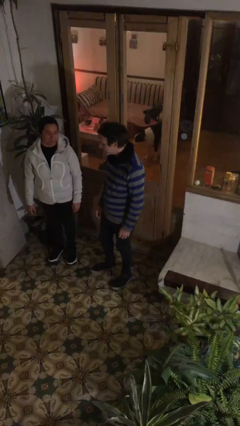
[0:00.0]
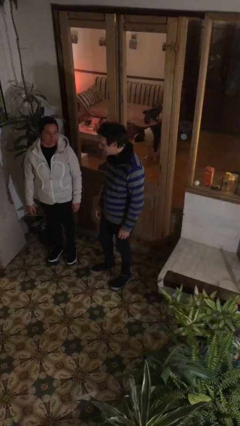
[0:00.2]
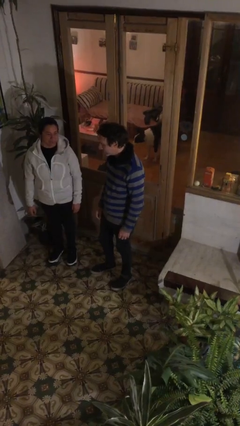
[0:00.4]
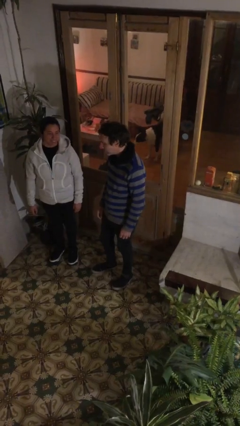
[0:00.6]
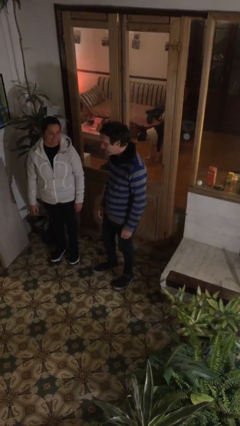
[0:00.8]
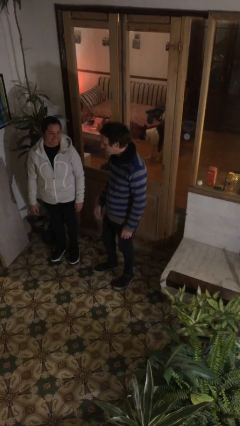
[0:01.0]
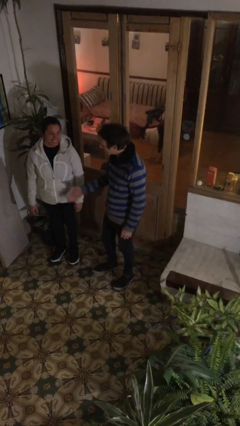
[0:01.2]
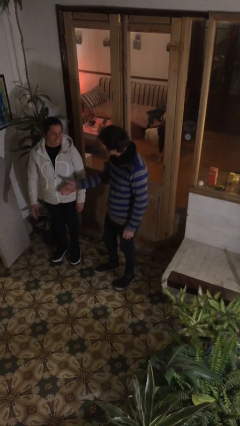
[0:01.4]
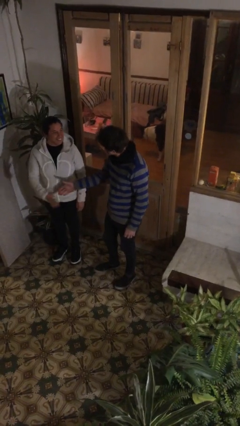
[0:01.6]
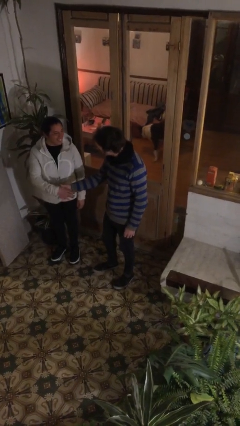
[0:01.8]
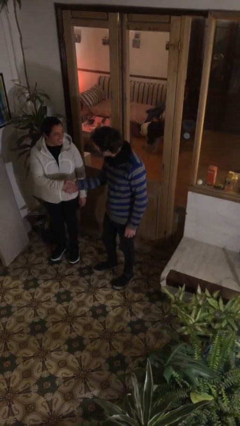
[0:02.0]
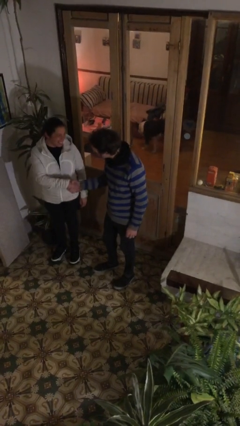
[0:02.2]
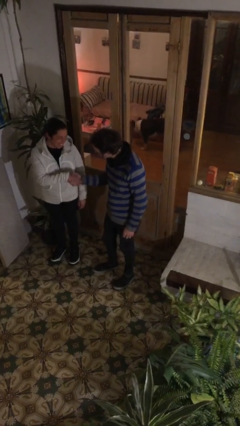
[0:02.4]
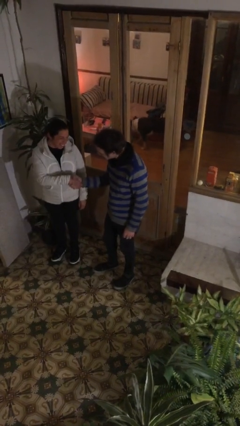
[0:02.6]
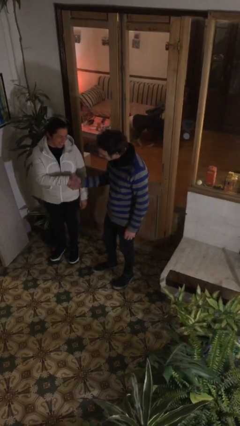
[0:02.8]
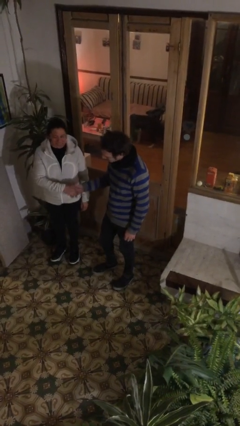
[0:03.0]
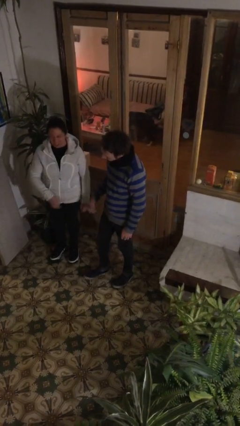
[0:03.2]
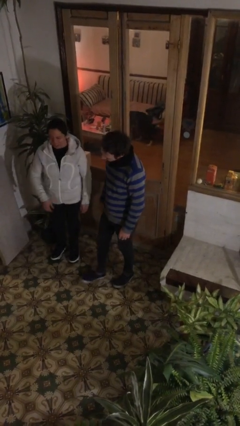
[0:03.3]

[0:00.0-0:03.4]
person shakes hand

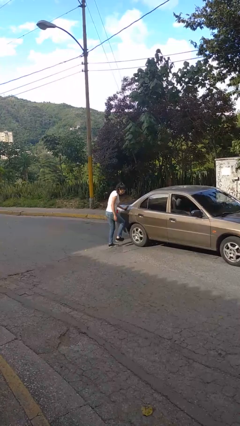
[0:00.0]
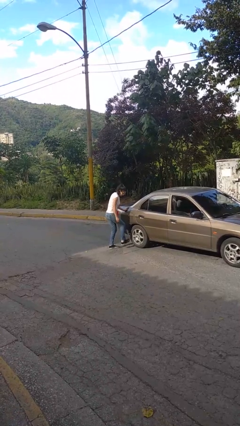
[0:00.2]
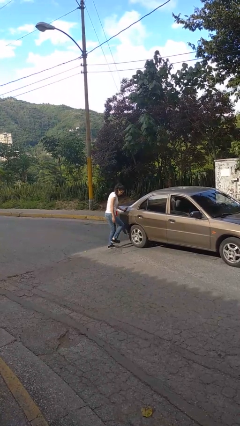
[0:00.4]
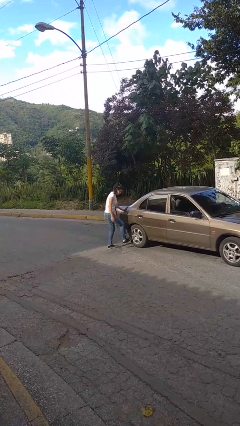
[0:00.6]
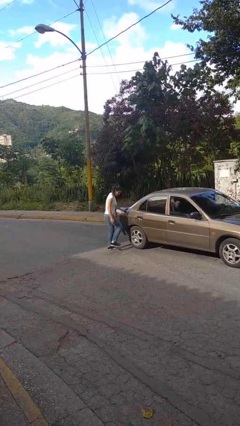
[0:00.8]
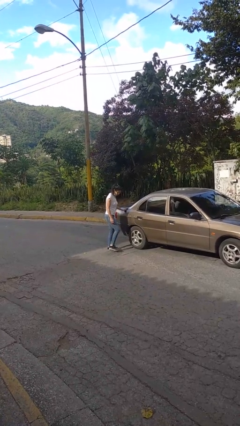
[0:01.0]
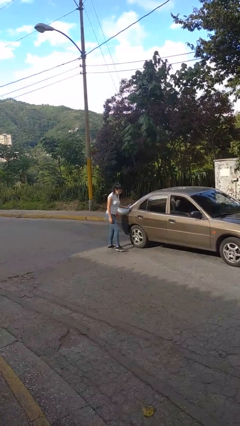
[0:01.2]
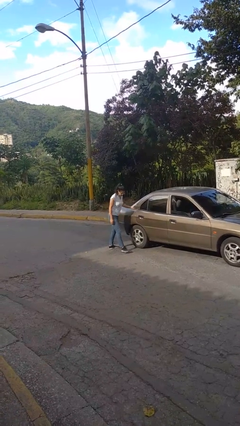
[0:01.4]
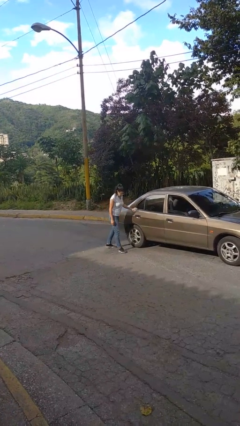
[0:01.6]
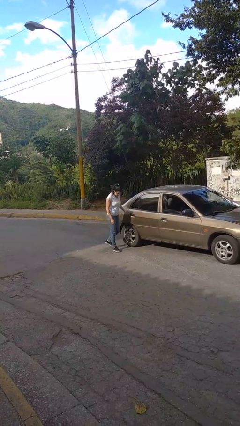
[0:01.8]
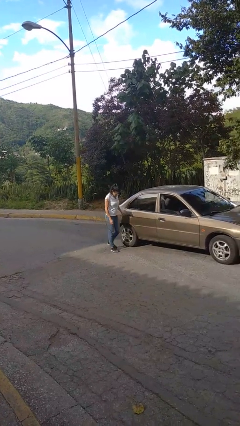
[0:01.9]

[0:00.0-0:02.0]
person kicks car tires

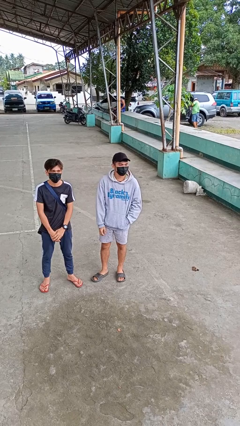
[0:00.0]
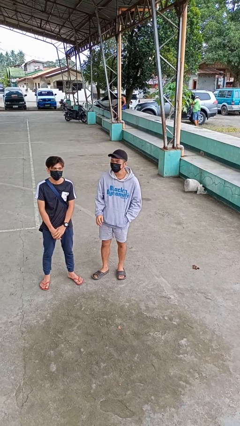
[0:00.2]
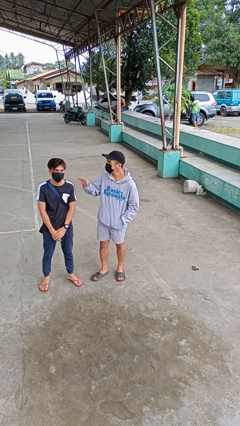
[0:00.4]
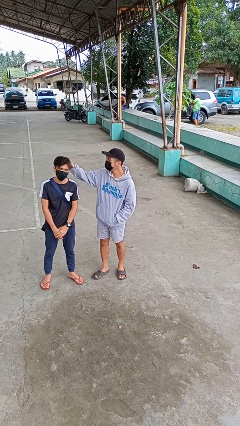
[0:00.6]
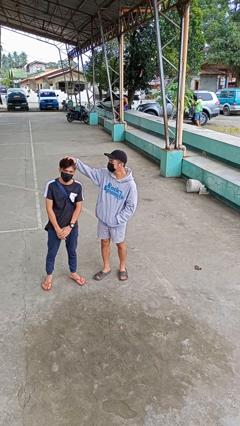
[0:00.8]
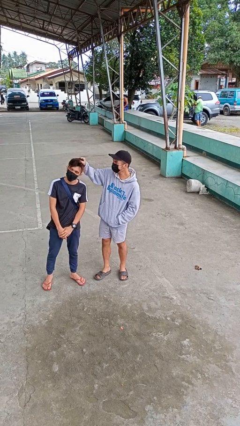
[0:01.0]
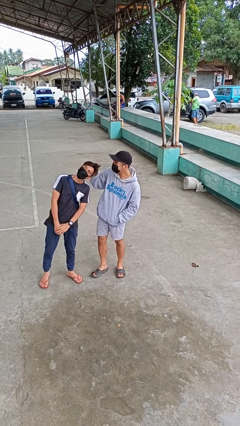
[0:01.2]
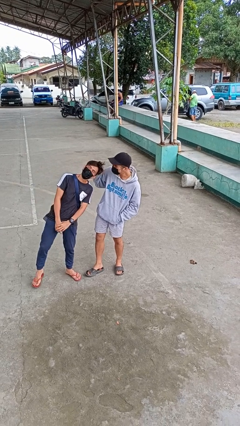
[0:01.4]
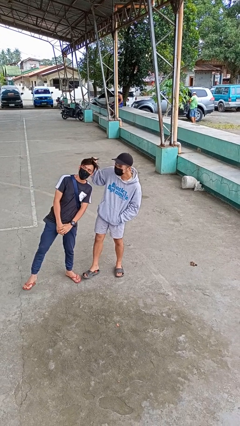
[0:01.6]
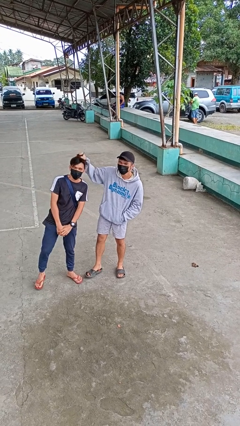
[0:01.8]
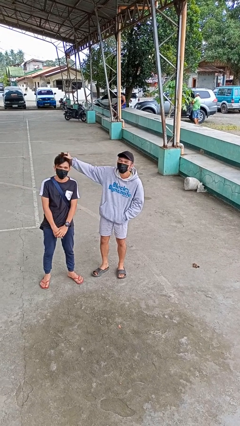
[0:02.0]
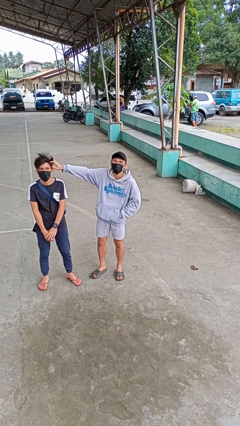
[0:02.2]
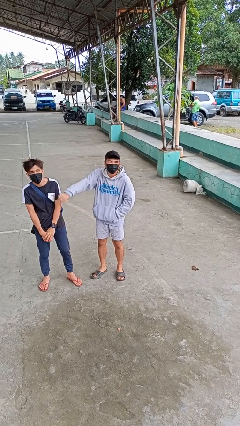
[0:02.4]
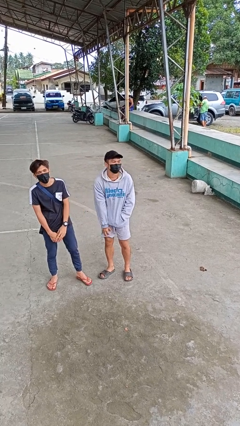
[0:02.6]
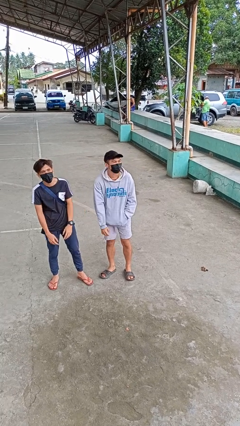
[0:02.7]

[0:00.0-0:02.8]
person grabs person by hair

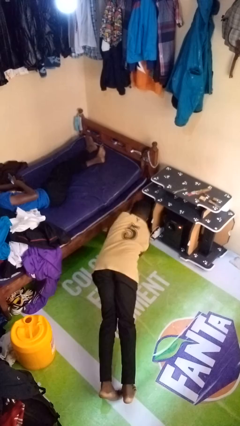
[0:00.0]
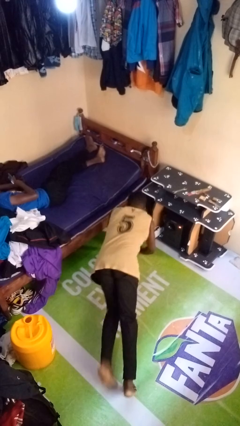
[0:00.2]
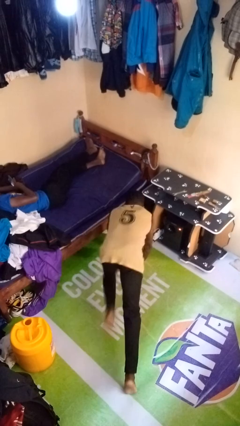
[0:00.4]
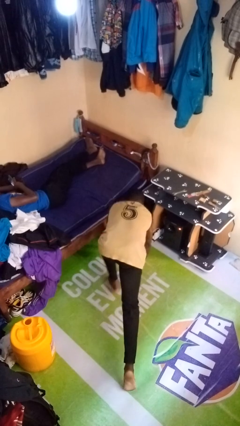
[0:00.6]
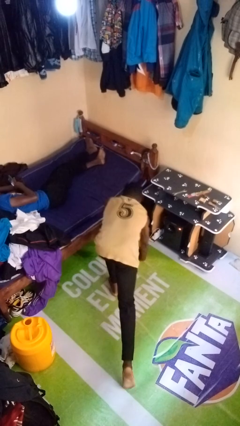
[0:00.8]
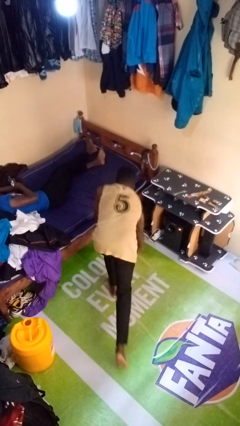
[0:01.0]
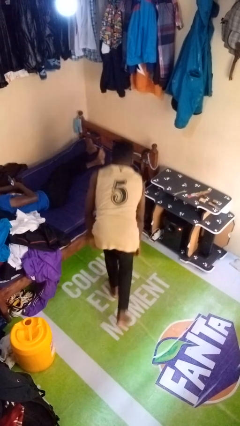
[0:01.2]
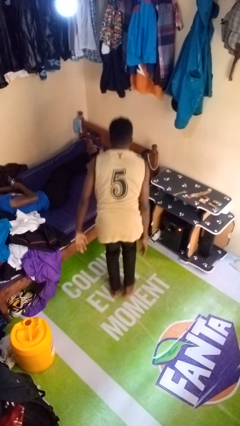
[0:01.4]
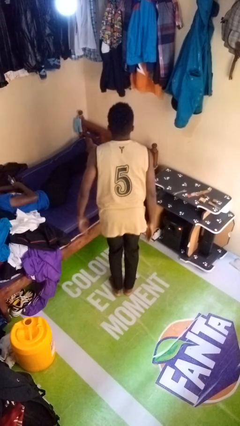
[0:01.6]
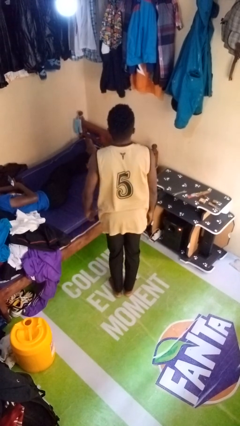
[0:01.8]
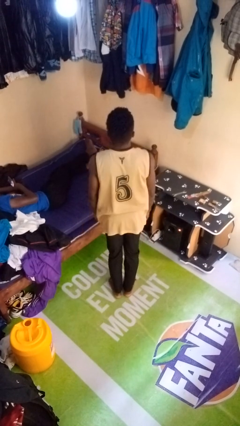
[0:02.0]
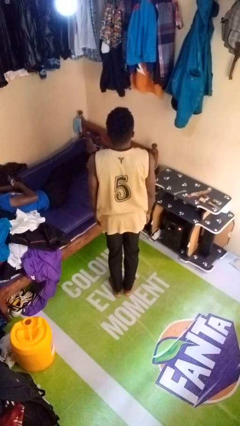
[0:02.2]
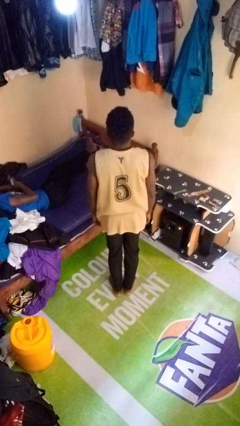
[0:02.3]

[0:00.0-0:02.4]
person stands up from floor

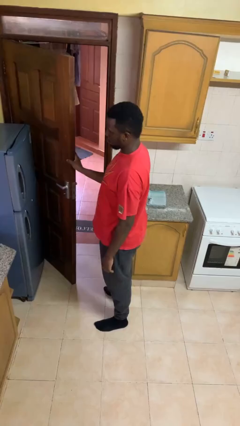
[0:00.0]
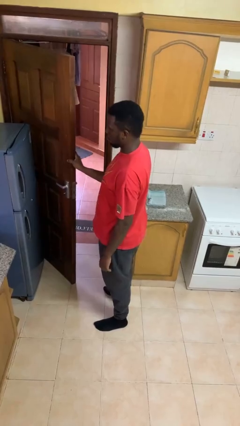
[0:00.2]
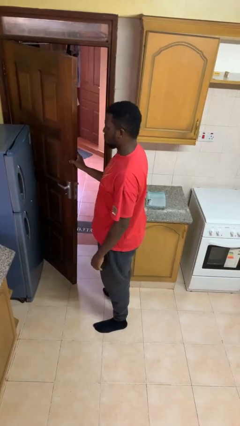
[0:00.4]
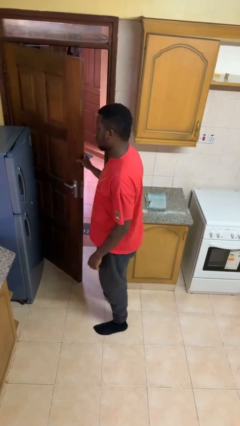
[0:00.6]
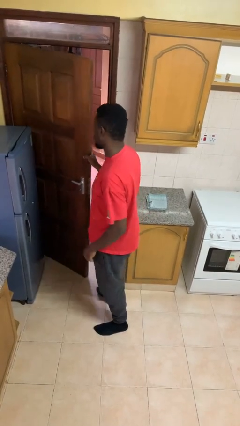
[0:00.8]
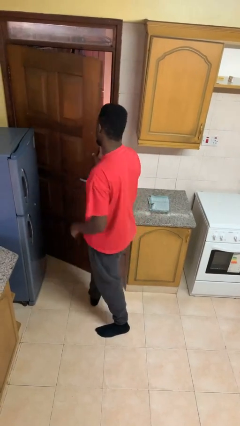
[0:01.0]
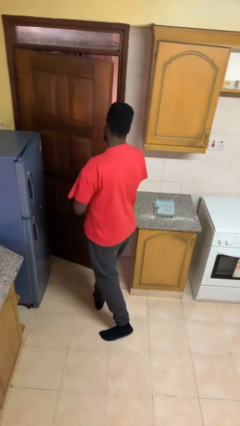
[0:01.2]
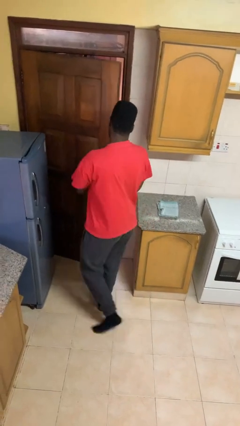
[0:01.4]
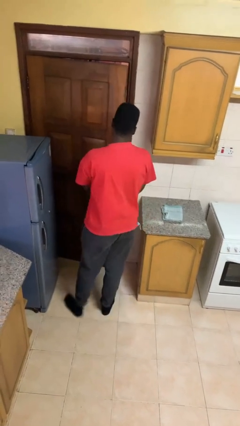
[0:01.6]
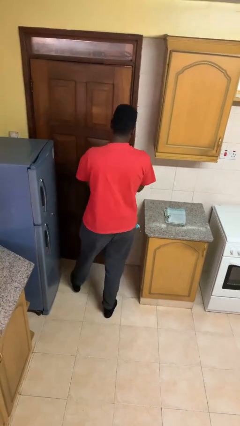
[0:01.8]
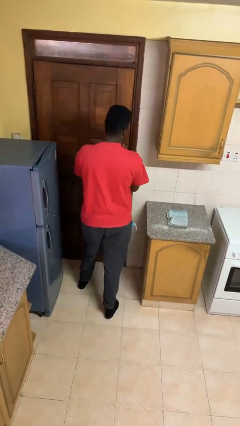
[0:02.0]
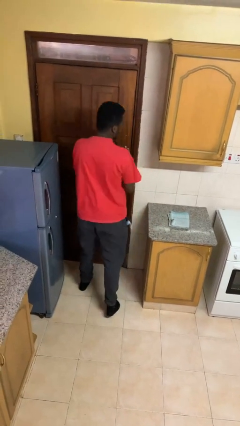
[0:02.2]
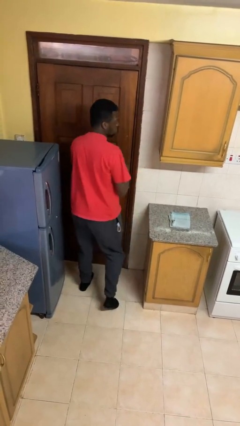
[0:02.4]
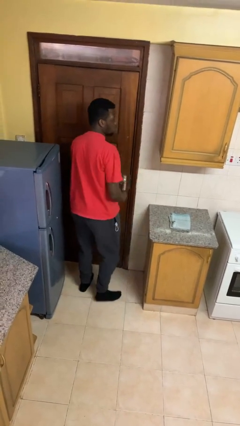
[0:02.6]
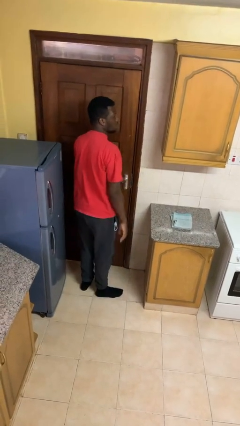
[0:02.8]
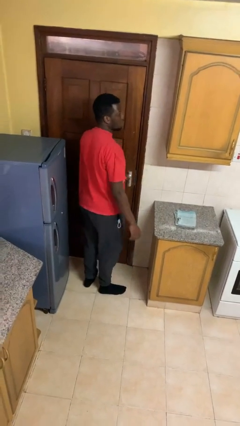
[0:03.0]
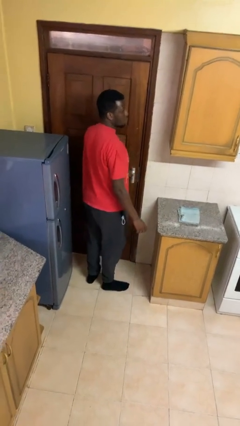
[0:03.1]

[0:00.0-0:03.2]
person closes facility door

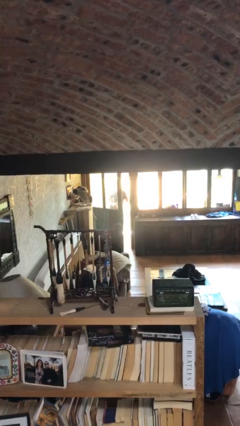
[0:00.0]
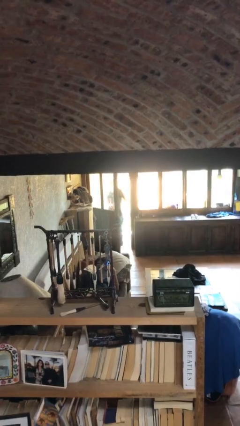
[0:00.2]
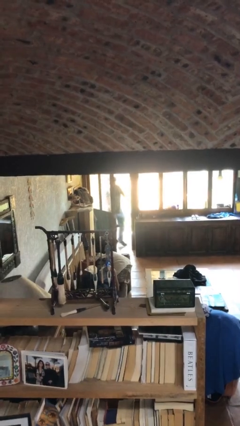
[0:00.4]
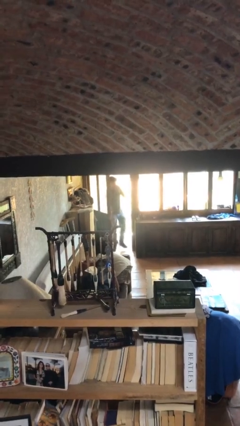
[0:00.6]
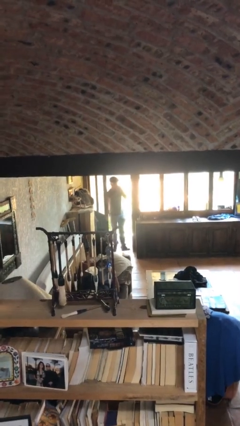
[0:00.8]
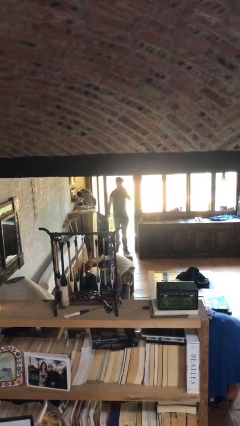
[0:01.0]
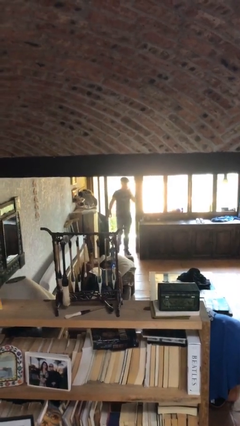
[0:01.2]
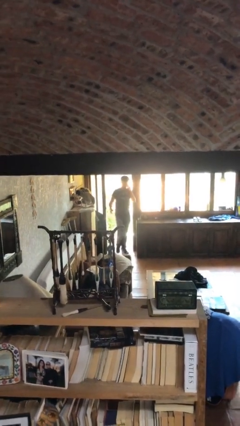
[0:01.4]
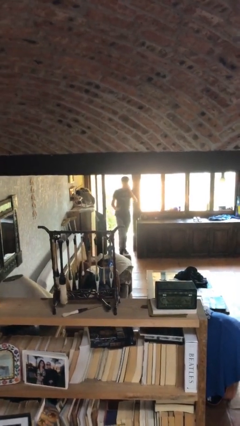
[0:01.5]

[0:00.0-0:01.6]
person enters scene through structure

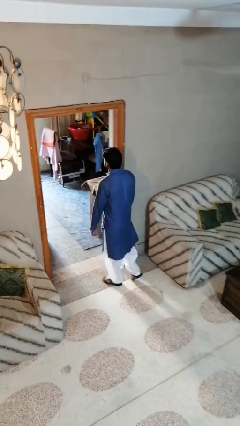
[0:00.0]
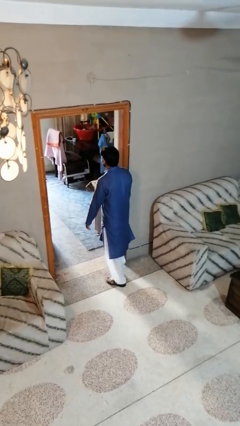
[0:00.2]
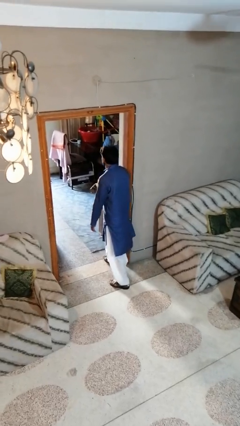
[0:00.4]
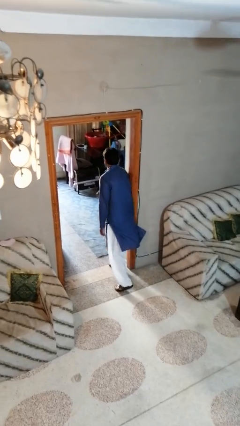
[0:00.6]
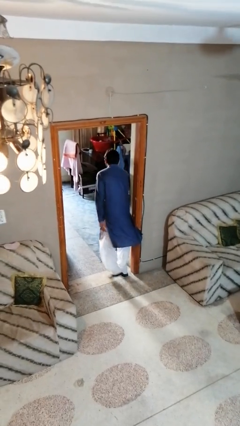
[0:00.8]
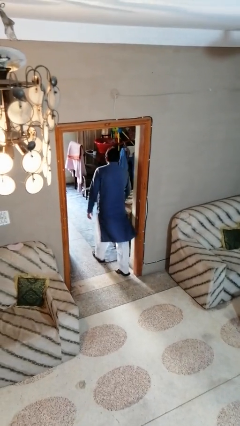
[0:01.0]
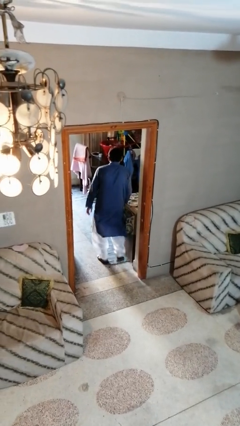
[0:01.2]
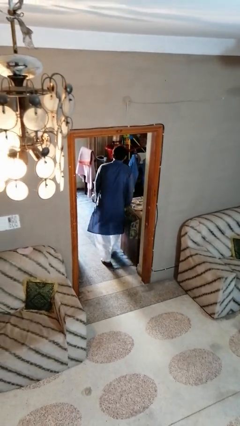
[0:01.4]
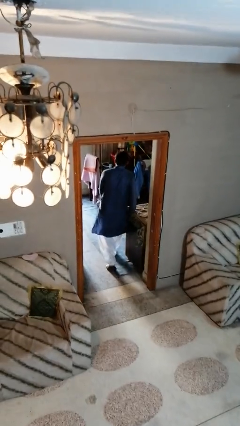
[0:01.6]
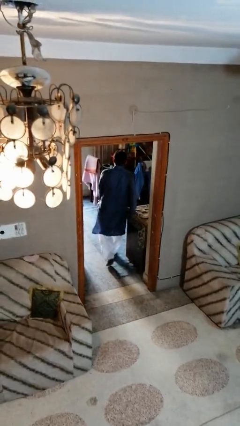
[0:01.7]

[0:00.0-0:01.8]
person bumps into wall
